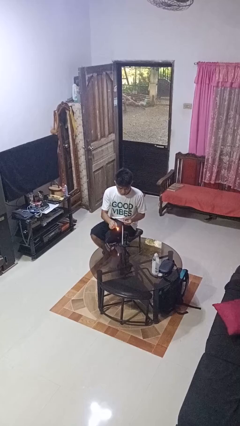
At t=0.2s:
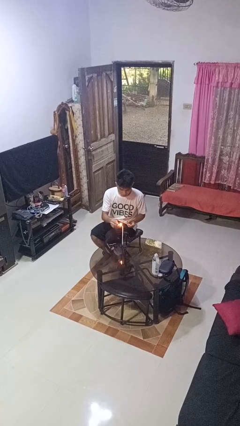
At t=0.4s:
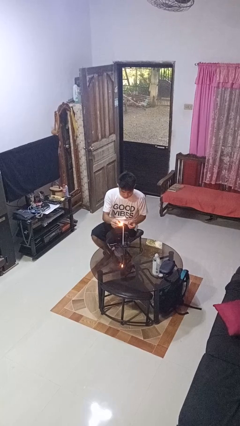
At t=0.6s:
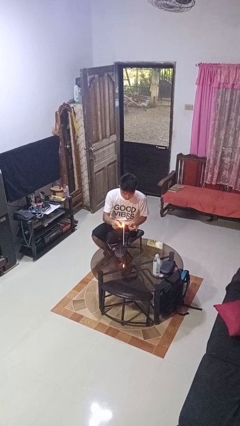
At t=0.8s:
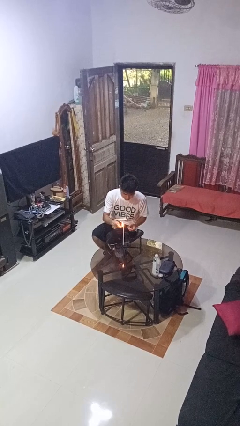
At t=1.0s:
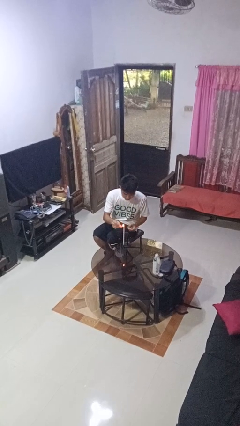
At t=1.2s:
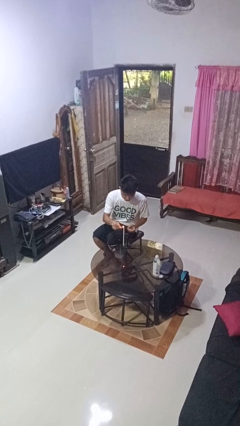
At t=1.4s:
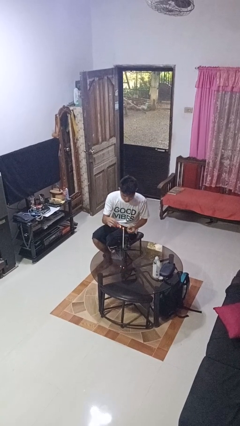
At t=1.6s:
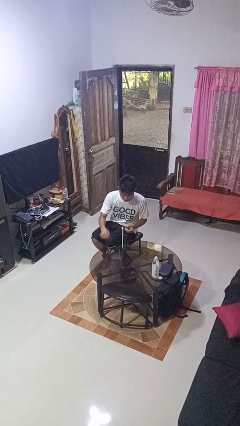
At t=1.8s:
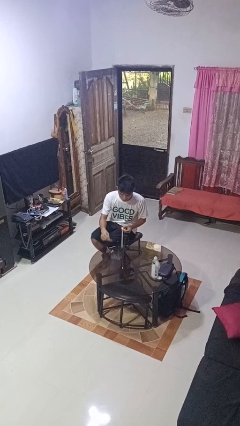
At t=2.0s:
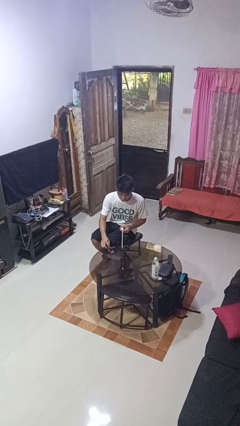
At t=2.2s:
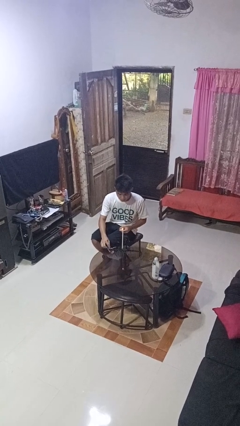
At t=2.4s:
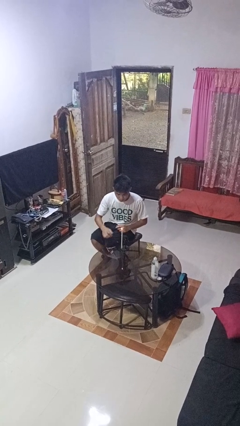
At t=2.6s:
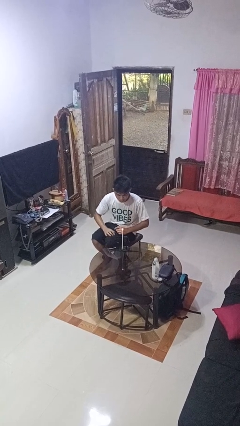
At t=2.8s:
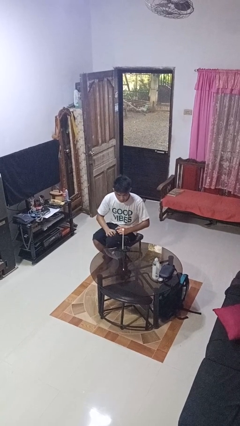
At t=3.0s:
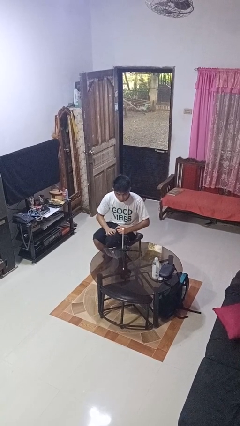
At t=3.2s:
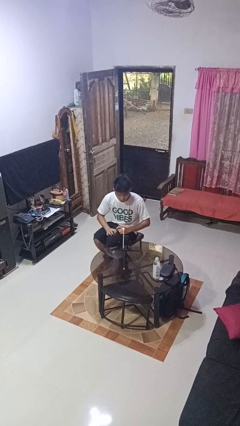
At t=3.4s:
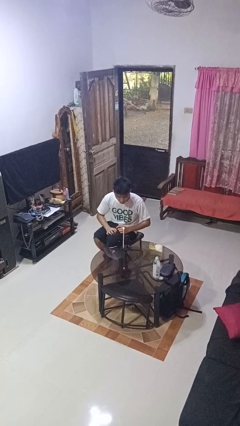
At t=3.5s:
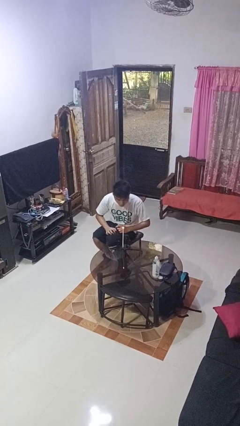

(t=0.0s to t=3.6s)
person lights candle

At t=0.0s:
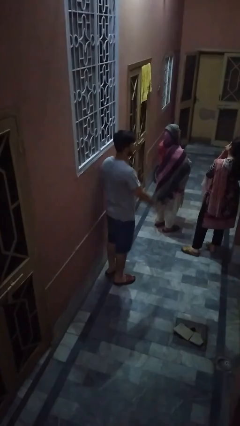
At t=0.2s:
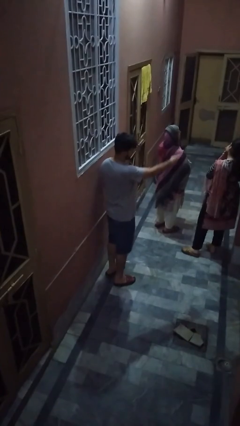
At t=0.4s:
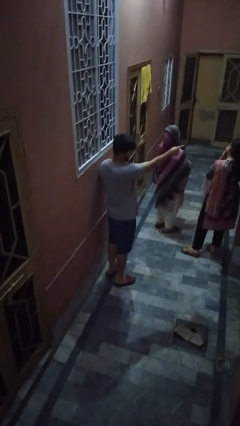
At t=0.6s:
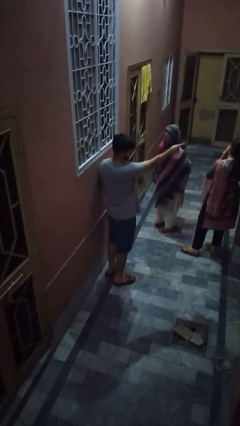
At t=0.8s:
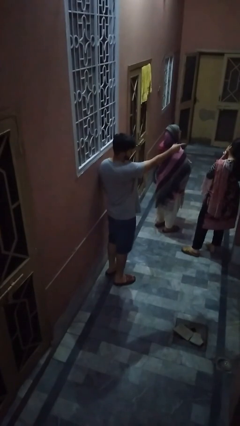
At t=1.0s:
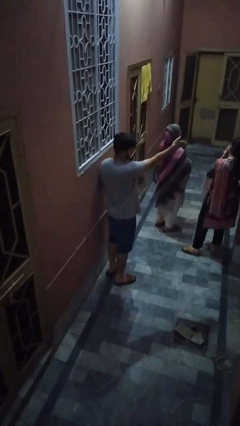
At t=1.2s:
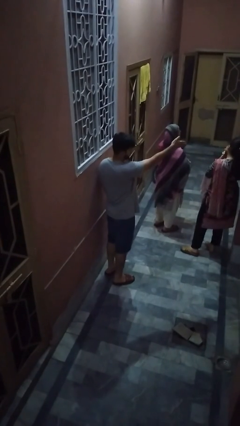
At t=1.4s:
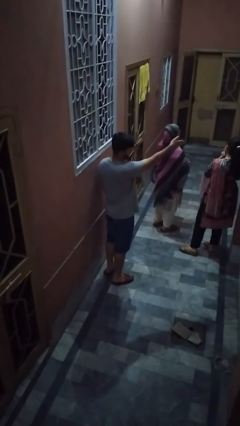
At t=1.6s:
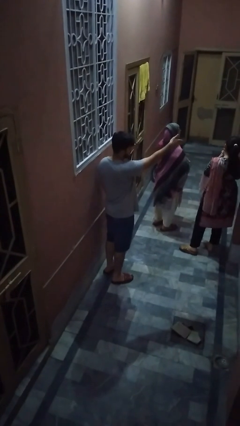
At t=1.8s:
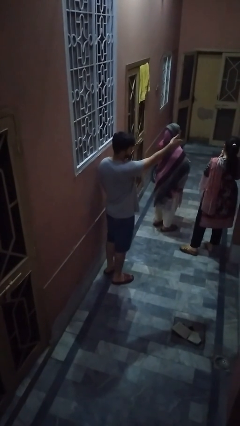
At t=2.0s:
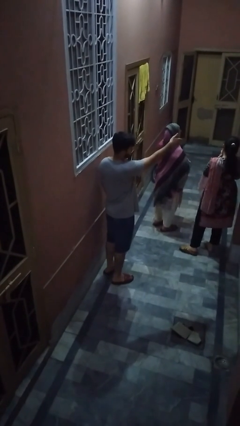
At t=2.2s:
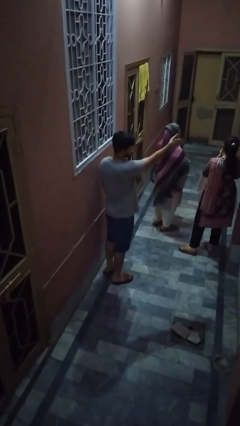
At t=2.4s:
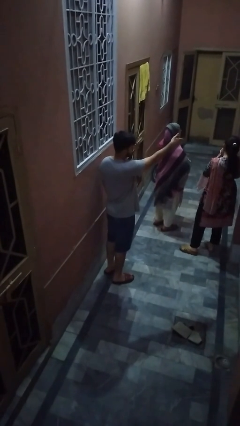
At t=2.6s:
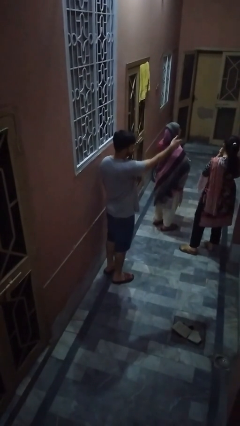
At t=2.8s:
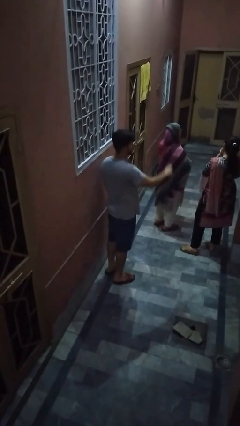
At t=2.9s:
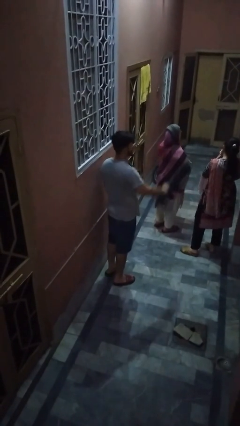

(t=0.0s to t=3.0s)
person points at person

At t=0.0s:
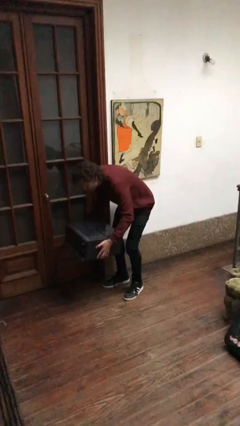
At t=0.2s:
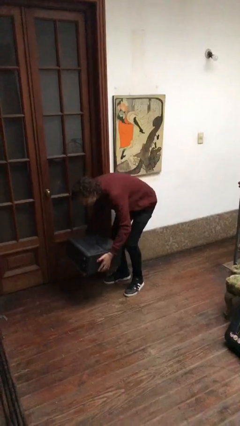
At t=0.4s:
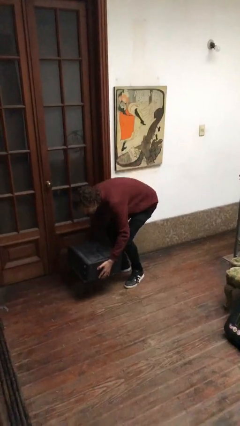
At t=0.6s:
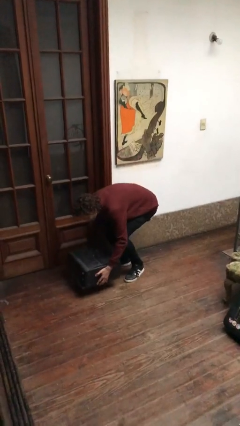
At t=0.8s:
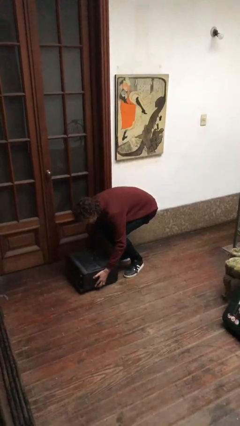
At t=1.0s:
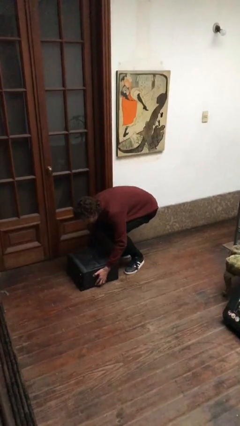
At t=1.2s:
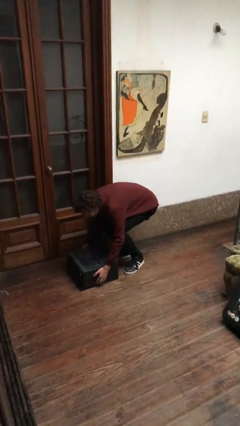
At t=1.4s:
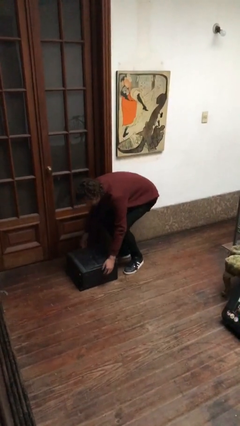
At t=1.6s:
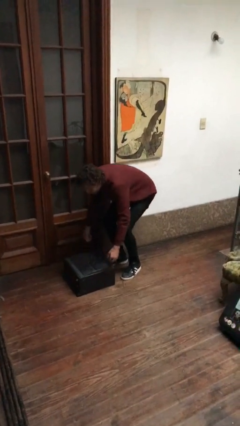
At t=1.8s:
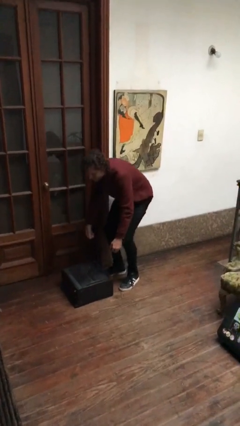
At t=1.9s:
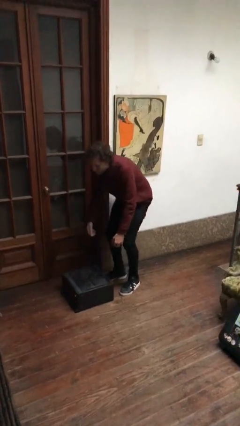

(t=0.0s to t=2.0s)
person puts down object on floor

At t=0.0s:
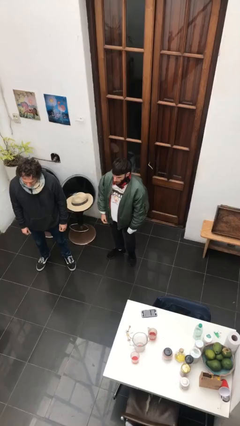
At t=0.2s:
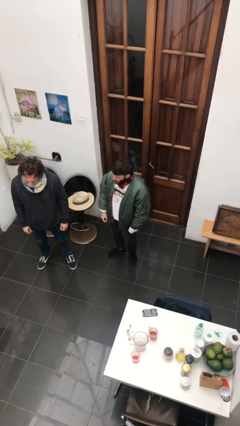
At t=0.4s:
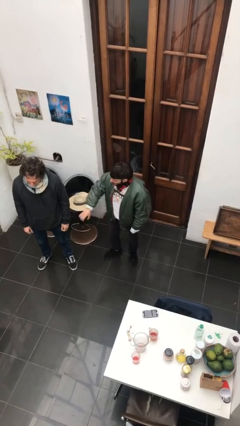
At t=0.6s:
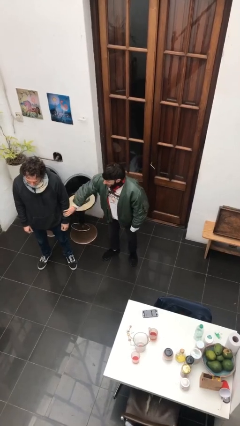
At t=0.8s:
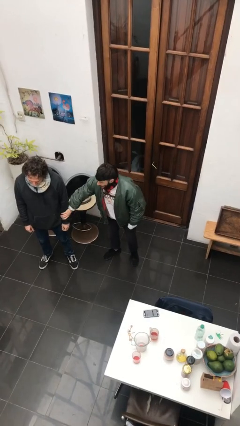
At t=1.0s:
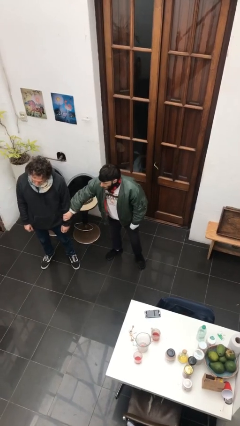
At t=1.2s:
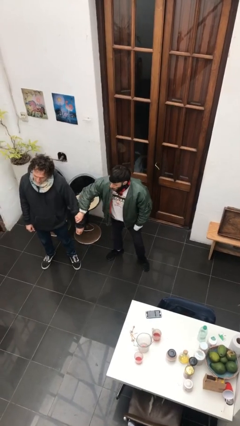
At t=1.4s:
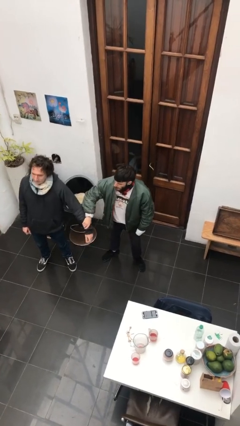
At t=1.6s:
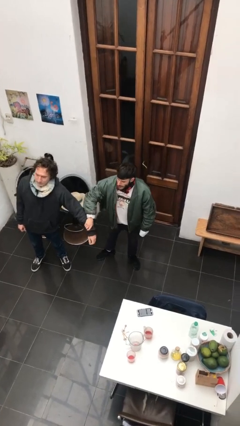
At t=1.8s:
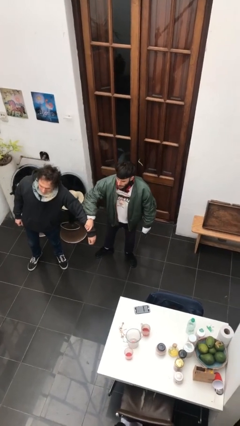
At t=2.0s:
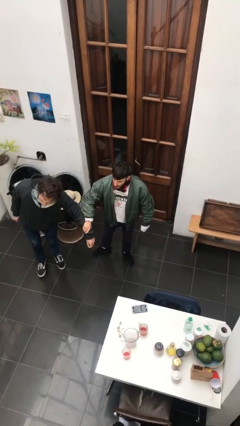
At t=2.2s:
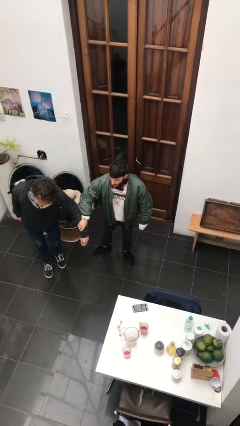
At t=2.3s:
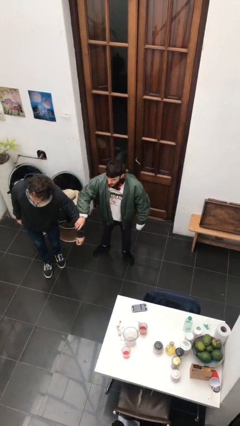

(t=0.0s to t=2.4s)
person grabs person by forearm

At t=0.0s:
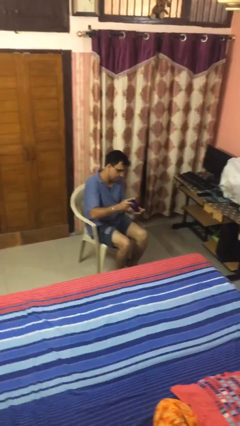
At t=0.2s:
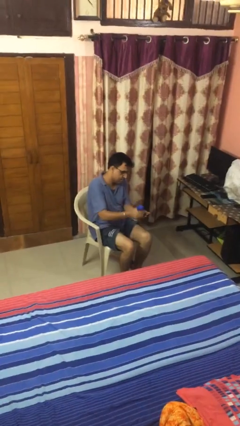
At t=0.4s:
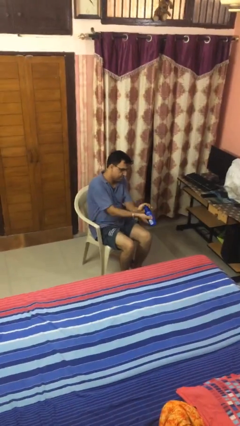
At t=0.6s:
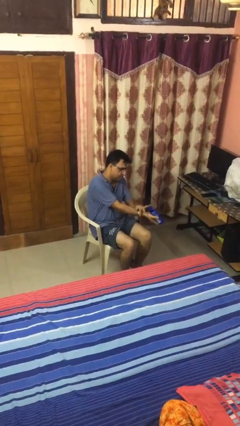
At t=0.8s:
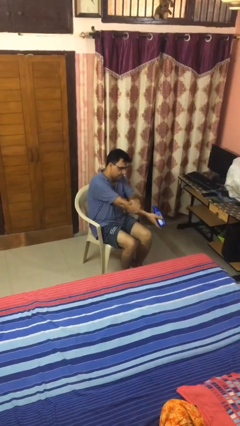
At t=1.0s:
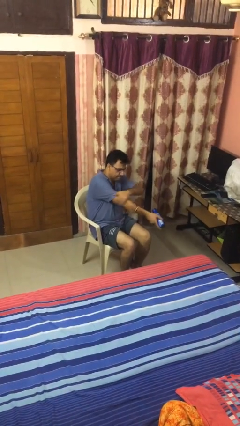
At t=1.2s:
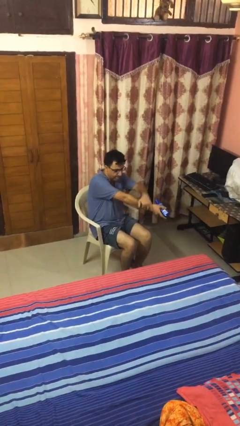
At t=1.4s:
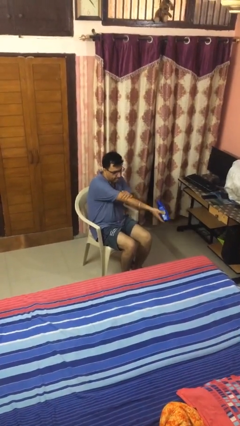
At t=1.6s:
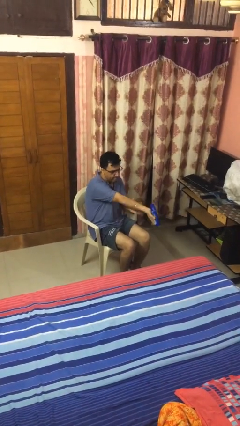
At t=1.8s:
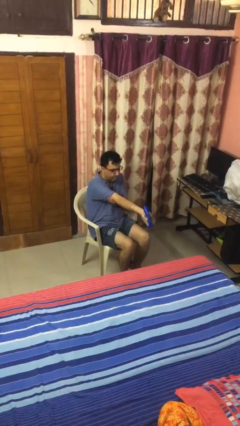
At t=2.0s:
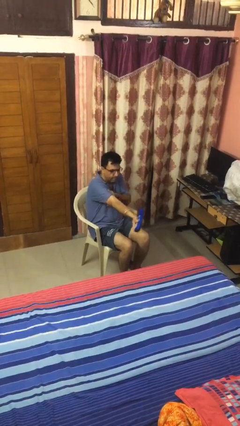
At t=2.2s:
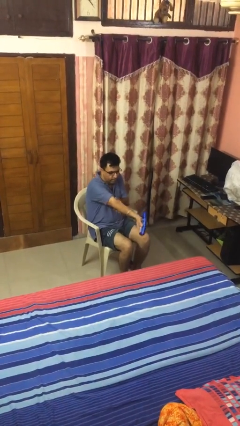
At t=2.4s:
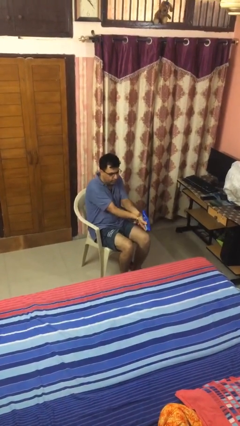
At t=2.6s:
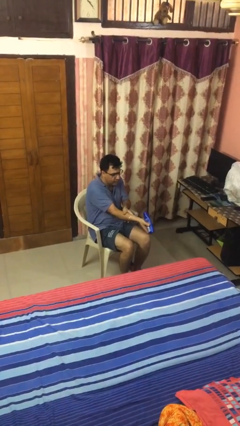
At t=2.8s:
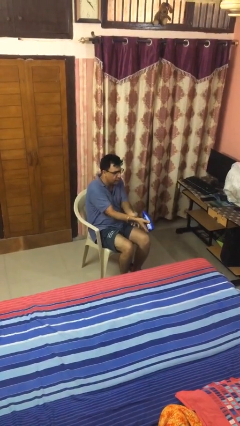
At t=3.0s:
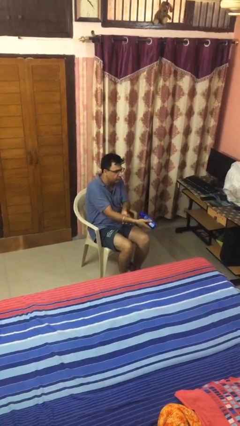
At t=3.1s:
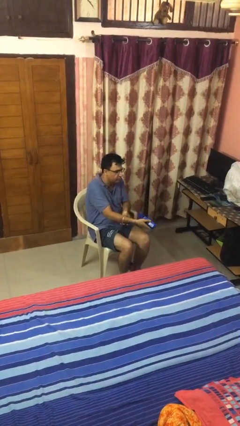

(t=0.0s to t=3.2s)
person applies sunscreen

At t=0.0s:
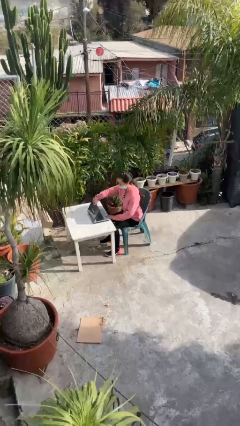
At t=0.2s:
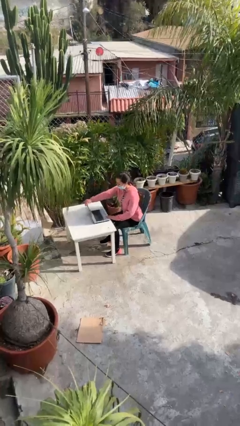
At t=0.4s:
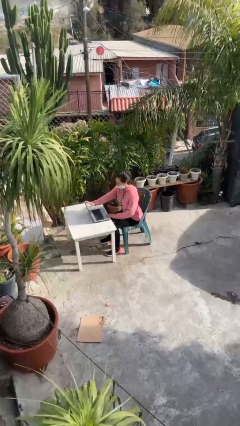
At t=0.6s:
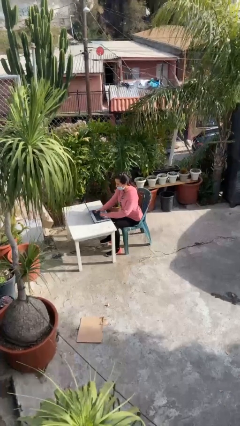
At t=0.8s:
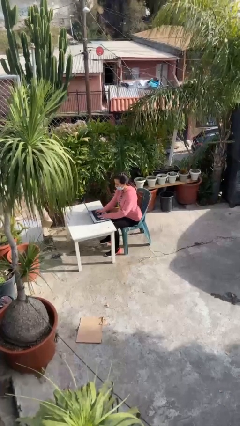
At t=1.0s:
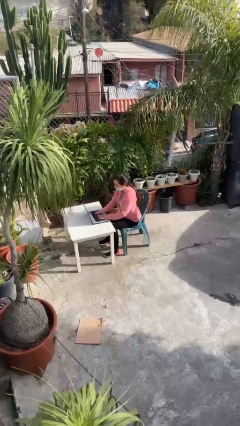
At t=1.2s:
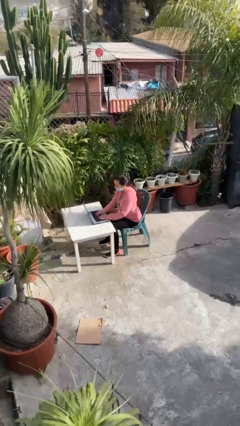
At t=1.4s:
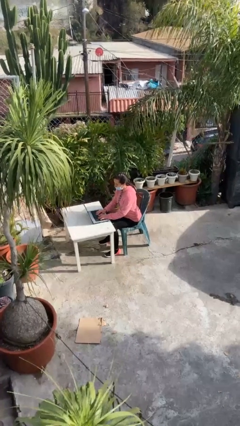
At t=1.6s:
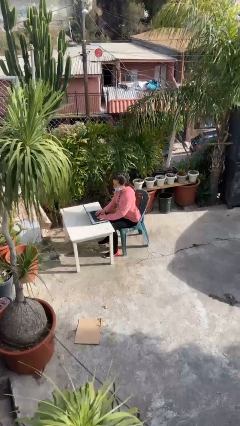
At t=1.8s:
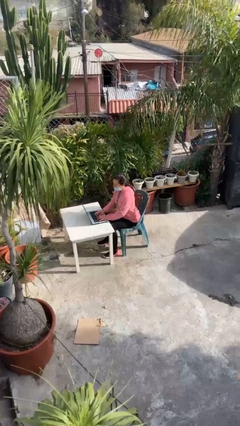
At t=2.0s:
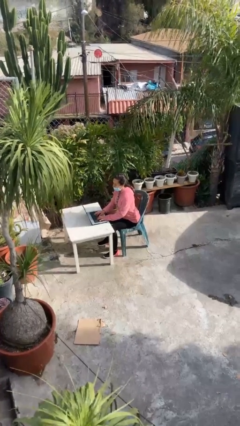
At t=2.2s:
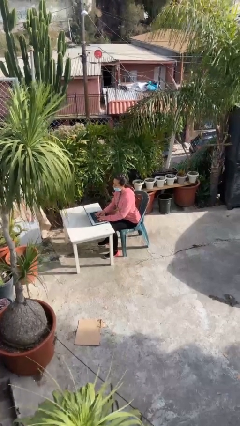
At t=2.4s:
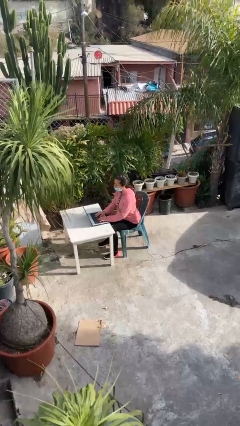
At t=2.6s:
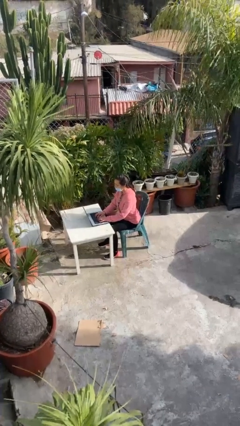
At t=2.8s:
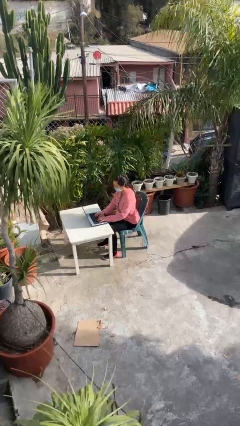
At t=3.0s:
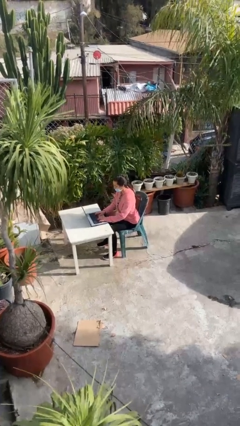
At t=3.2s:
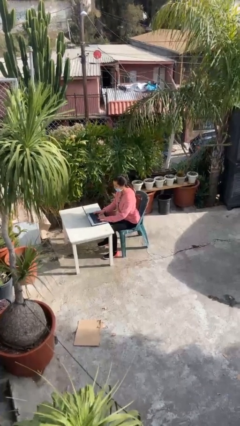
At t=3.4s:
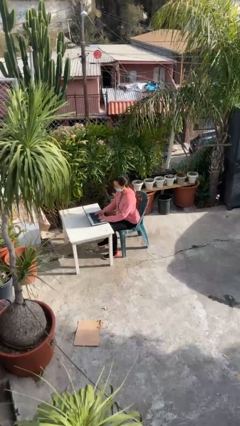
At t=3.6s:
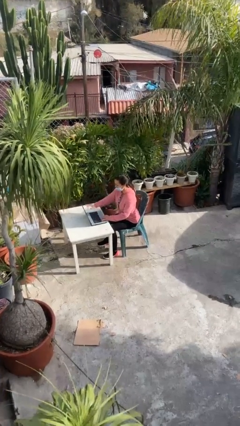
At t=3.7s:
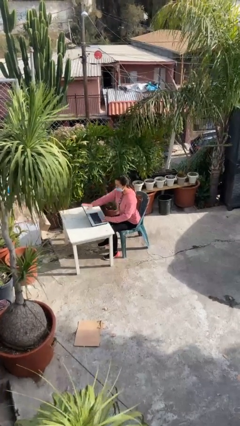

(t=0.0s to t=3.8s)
person interacts with laptop
